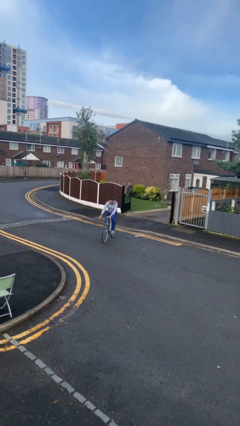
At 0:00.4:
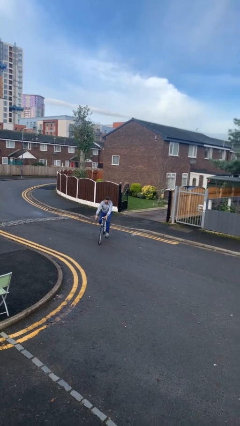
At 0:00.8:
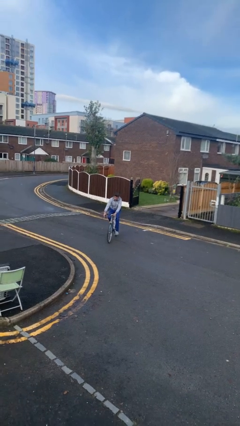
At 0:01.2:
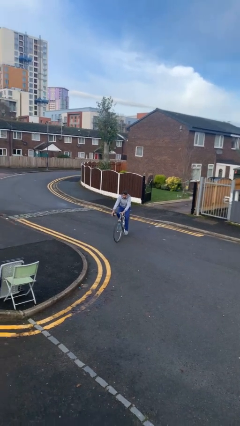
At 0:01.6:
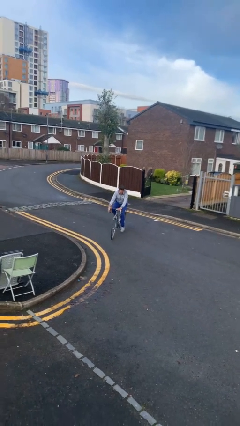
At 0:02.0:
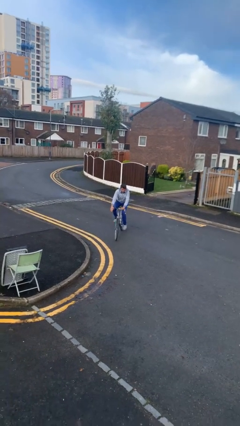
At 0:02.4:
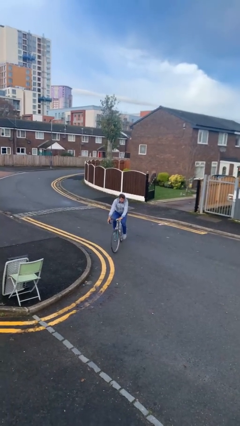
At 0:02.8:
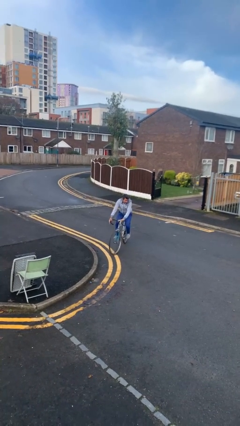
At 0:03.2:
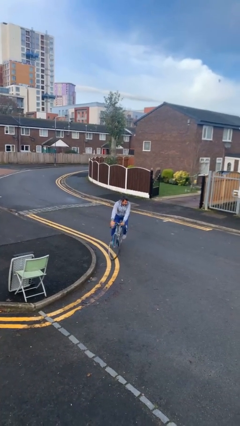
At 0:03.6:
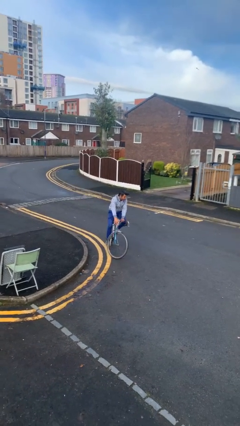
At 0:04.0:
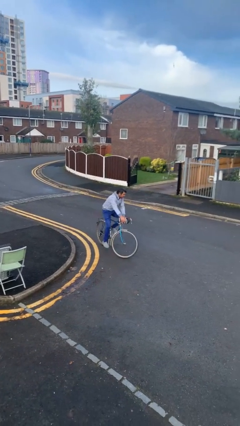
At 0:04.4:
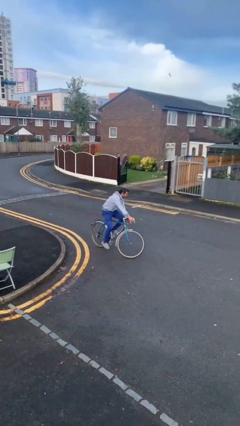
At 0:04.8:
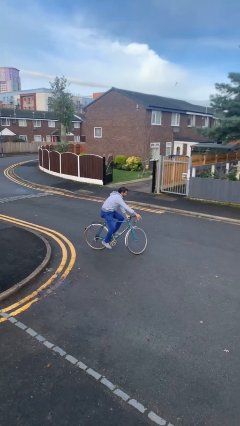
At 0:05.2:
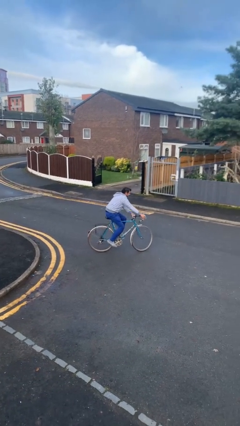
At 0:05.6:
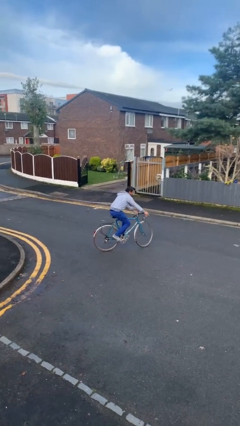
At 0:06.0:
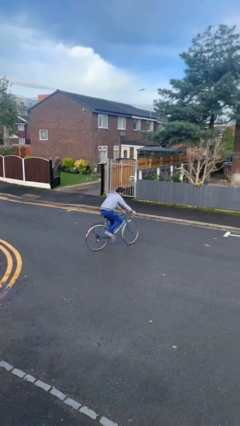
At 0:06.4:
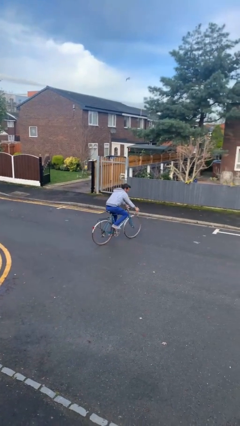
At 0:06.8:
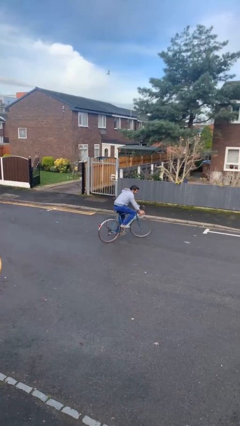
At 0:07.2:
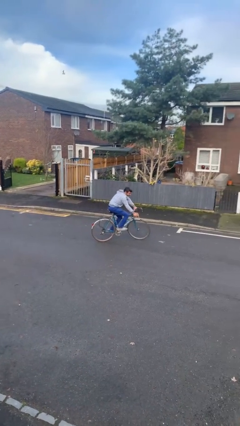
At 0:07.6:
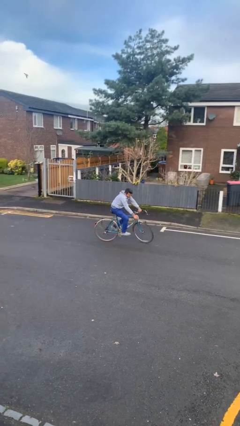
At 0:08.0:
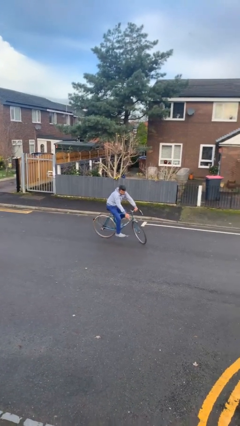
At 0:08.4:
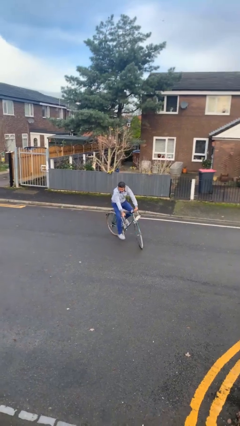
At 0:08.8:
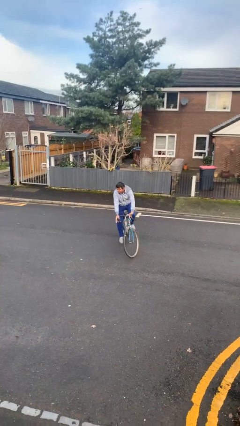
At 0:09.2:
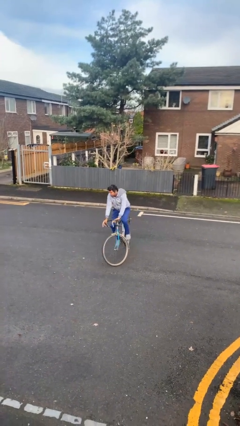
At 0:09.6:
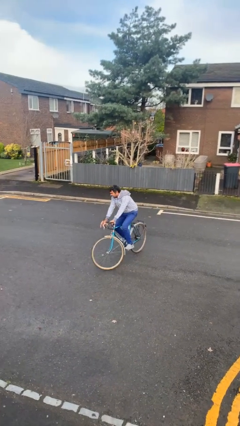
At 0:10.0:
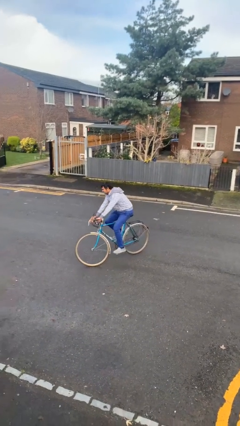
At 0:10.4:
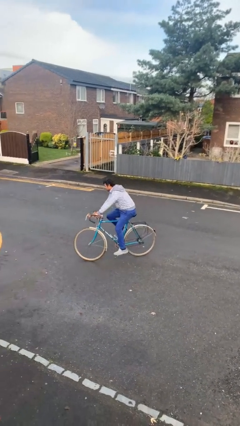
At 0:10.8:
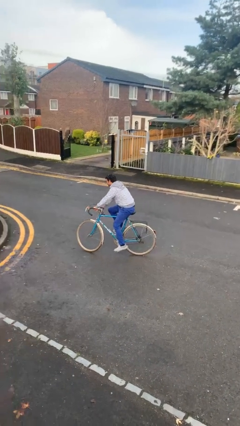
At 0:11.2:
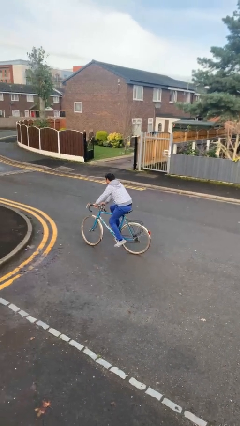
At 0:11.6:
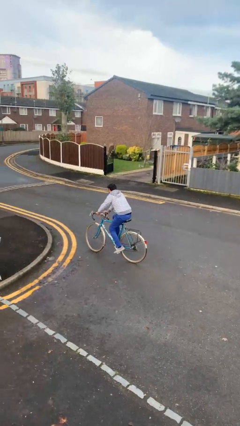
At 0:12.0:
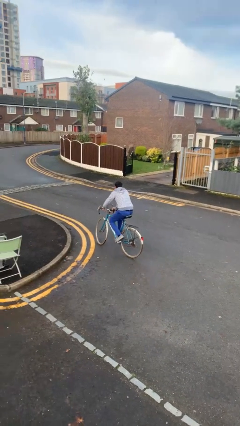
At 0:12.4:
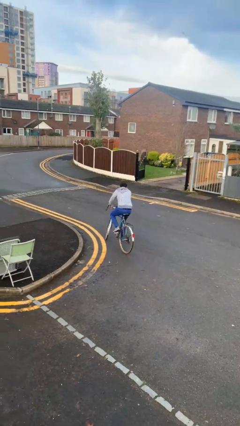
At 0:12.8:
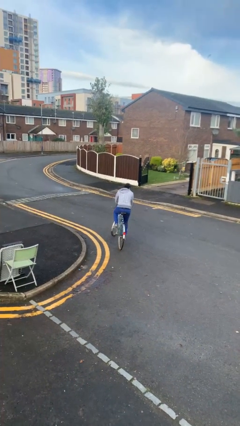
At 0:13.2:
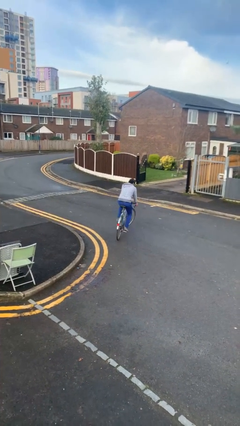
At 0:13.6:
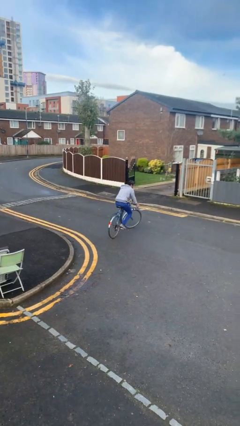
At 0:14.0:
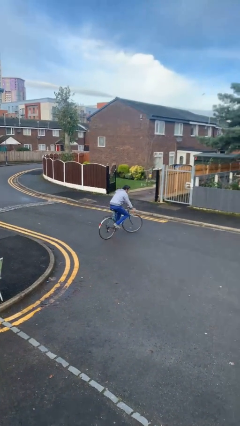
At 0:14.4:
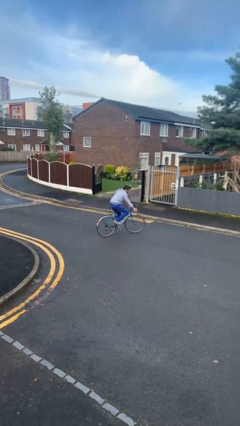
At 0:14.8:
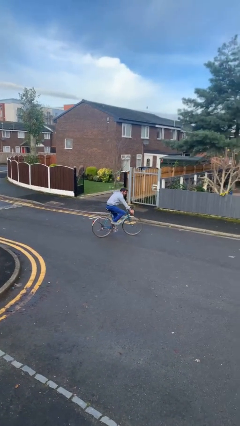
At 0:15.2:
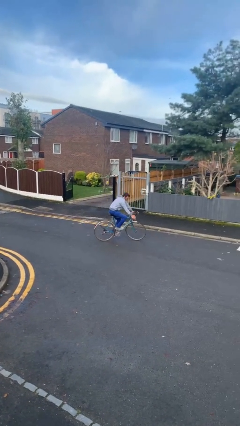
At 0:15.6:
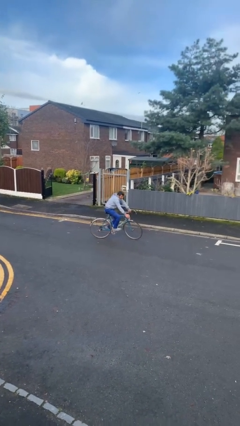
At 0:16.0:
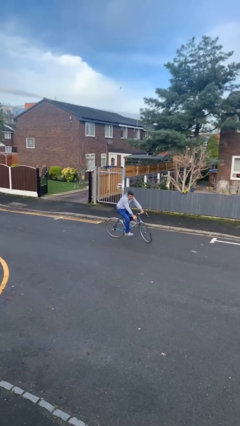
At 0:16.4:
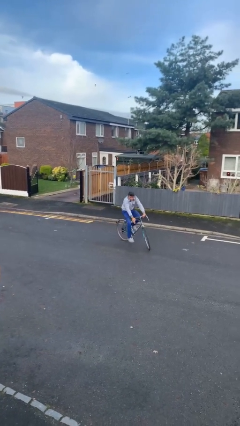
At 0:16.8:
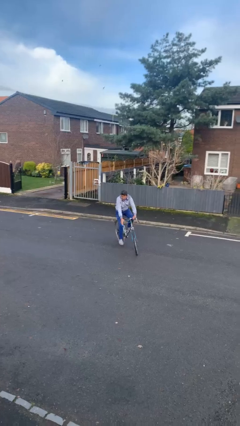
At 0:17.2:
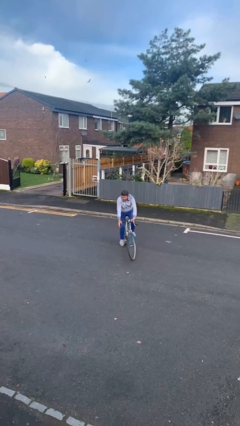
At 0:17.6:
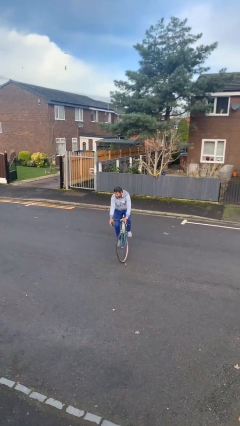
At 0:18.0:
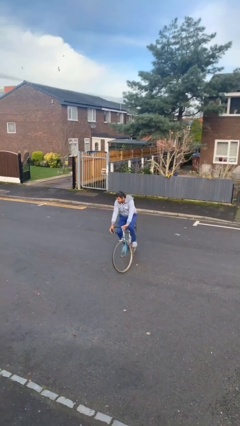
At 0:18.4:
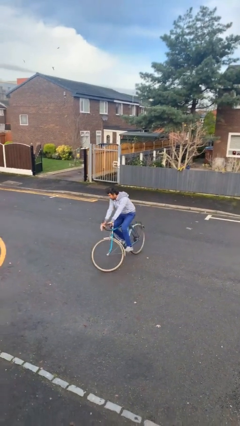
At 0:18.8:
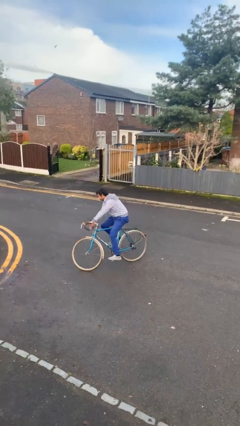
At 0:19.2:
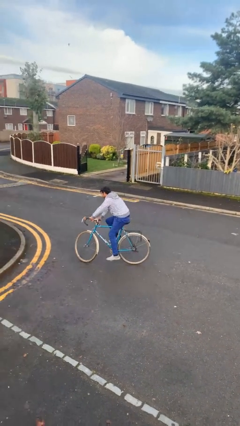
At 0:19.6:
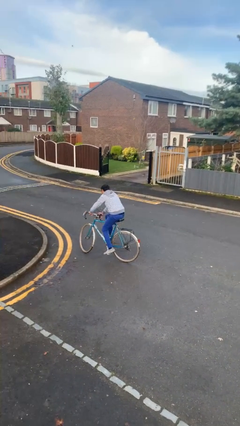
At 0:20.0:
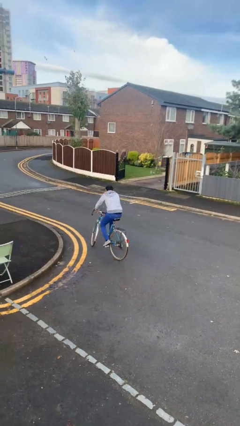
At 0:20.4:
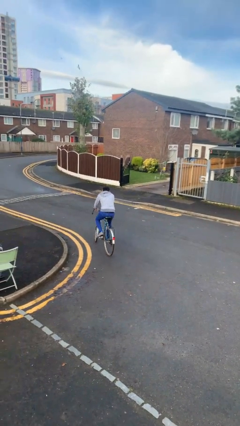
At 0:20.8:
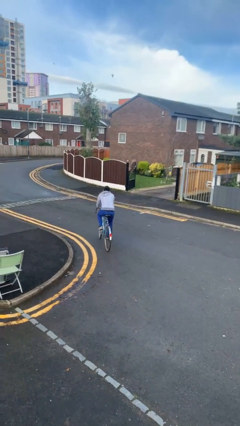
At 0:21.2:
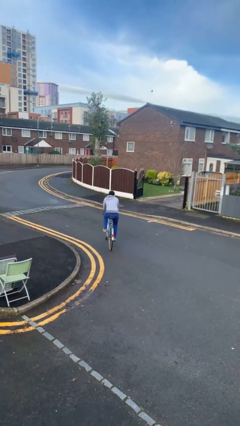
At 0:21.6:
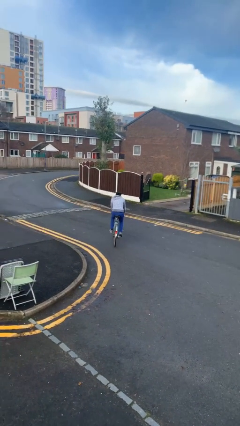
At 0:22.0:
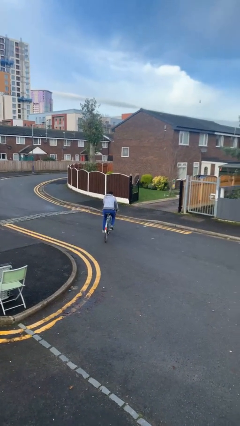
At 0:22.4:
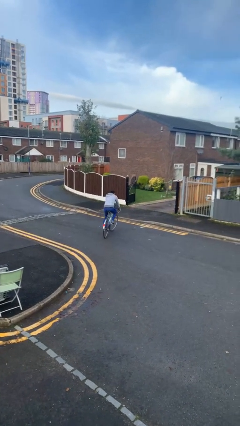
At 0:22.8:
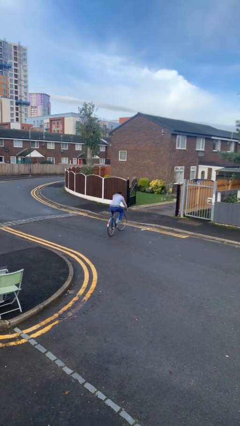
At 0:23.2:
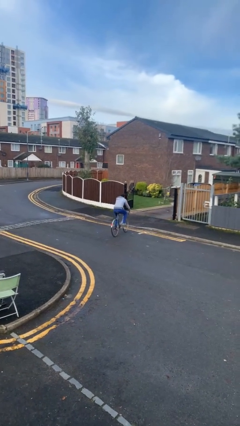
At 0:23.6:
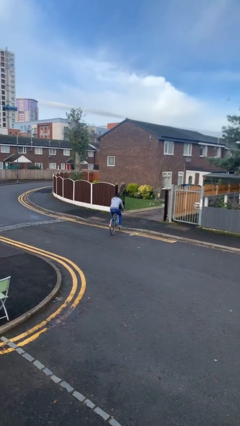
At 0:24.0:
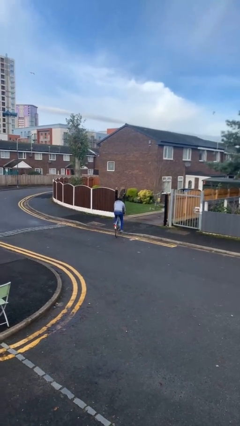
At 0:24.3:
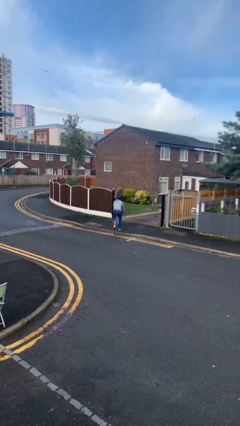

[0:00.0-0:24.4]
person rides bicycle

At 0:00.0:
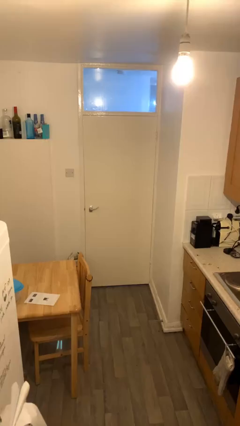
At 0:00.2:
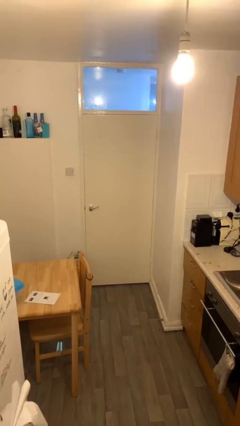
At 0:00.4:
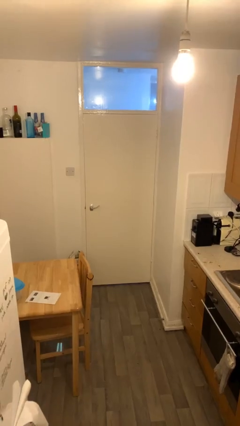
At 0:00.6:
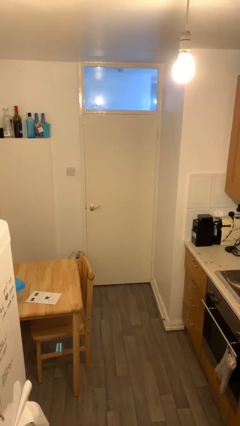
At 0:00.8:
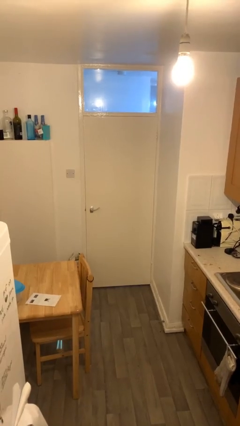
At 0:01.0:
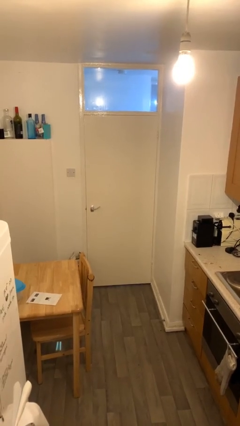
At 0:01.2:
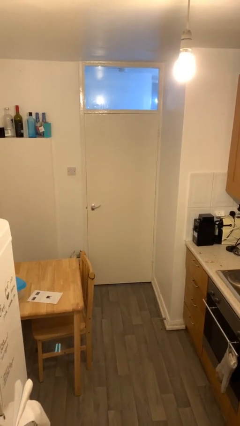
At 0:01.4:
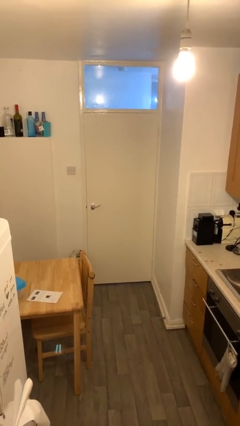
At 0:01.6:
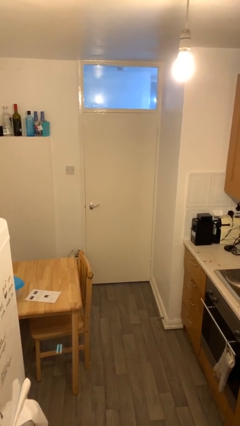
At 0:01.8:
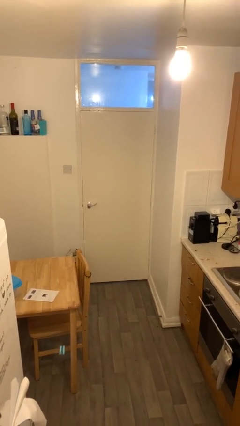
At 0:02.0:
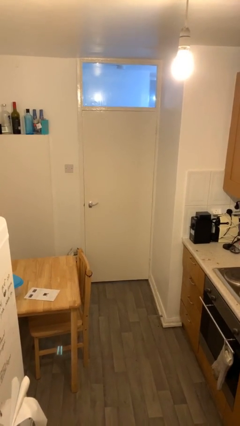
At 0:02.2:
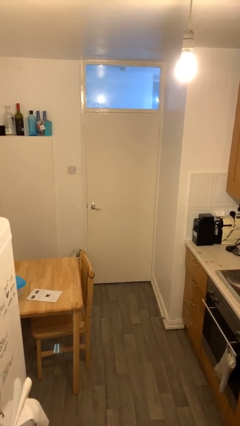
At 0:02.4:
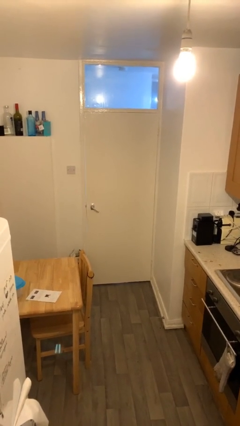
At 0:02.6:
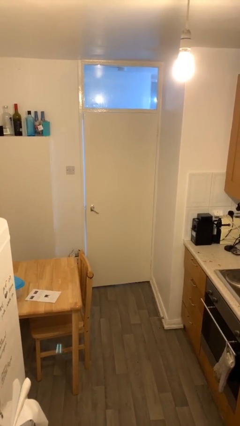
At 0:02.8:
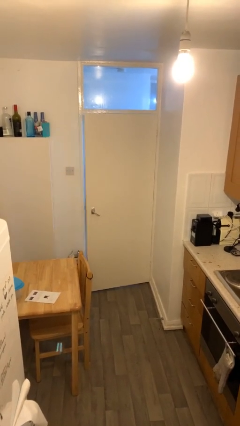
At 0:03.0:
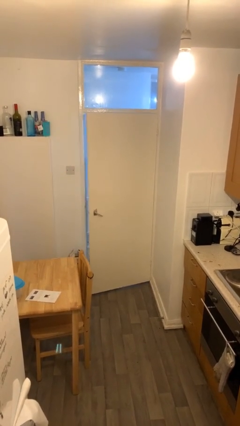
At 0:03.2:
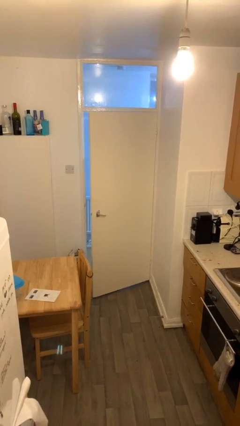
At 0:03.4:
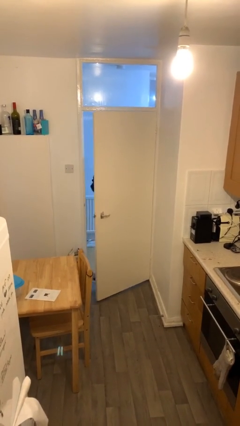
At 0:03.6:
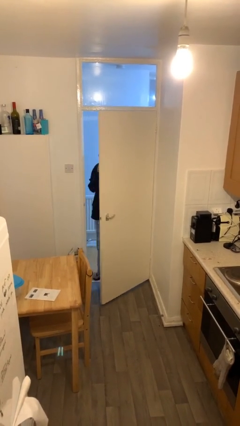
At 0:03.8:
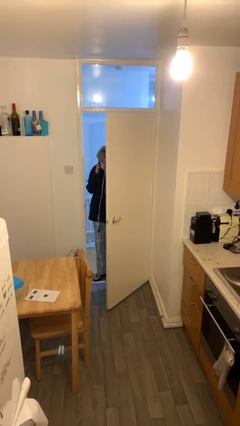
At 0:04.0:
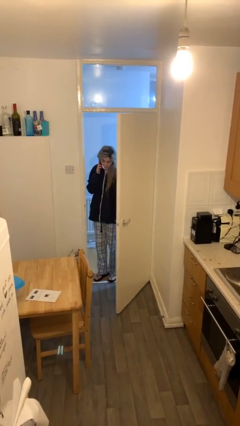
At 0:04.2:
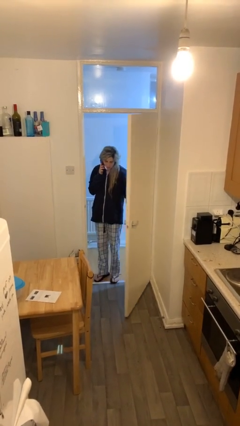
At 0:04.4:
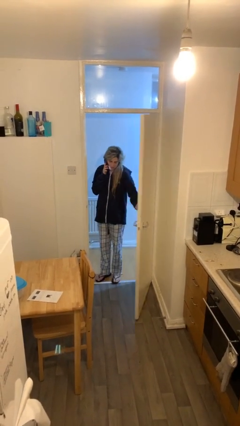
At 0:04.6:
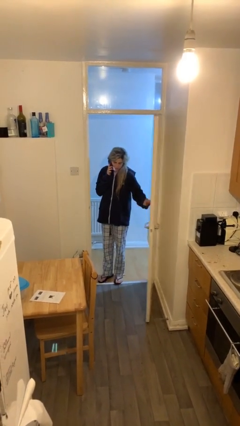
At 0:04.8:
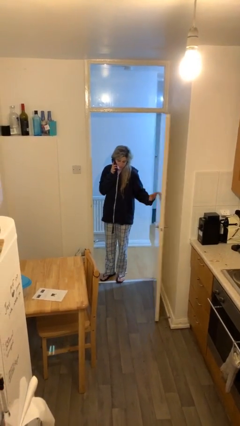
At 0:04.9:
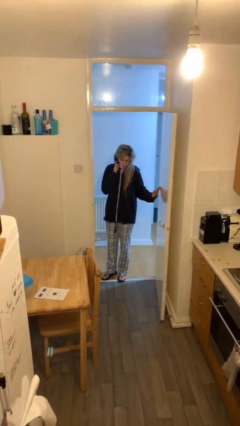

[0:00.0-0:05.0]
person opens facility door

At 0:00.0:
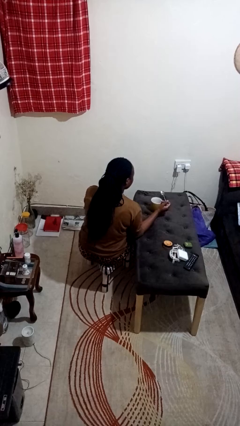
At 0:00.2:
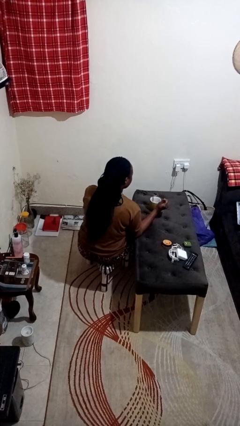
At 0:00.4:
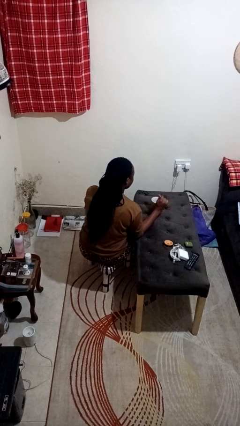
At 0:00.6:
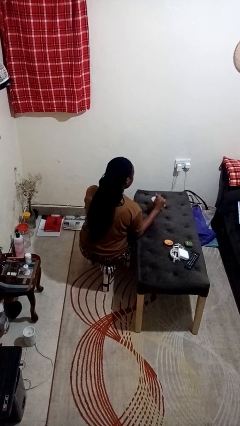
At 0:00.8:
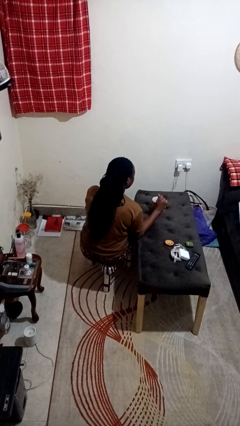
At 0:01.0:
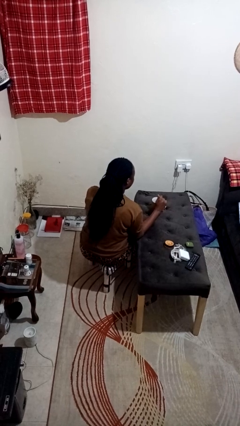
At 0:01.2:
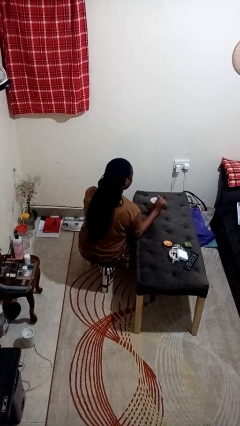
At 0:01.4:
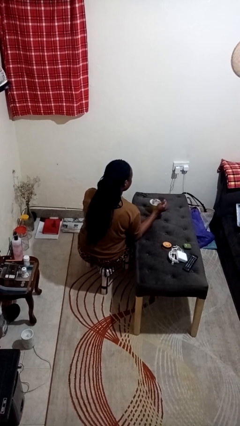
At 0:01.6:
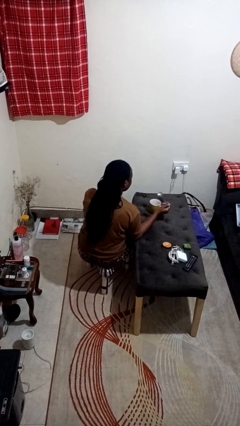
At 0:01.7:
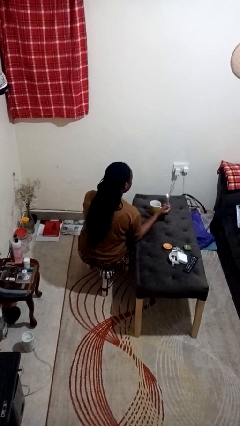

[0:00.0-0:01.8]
person stirs mug
